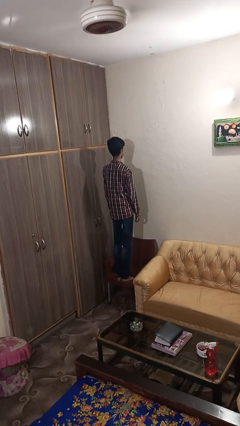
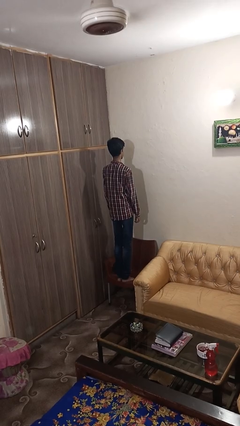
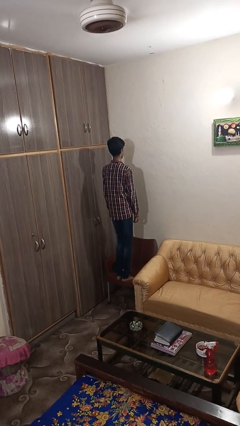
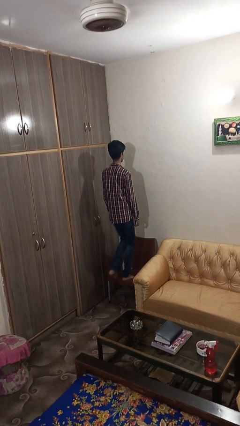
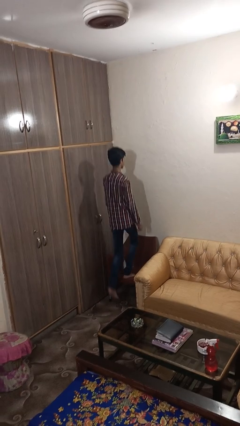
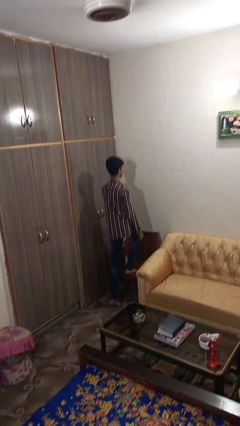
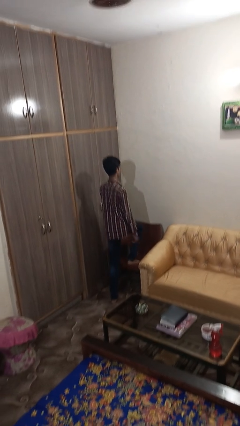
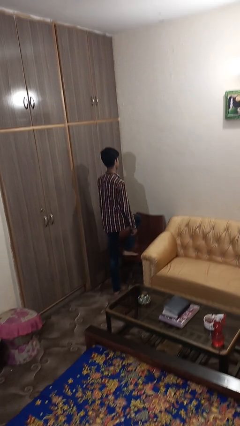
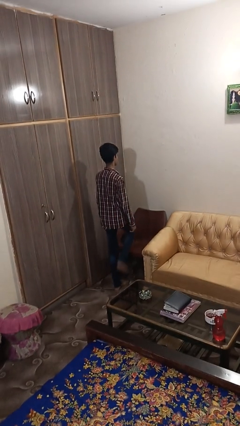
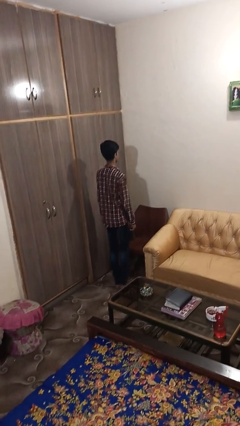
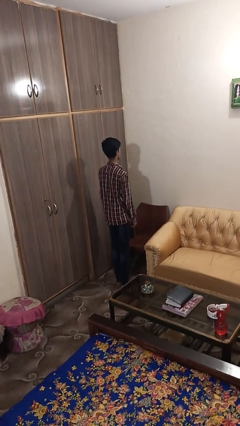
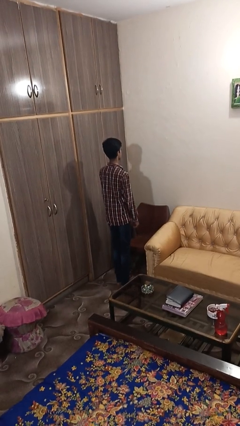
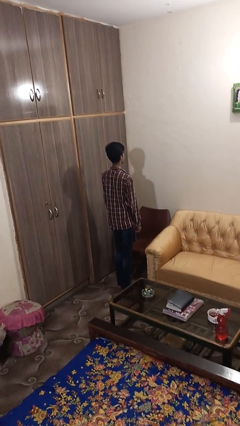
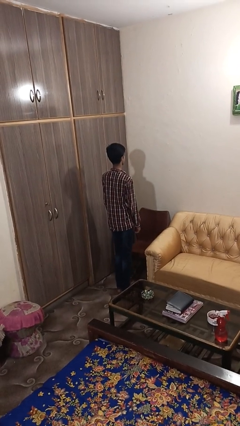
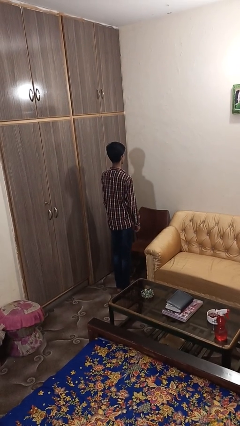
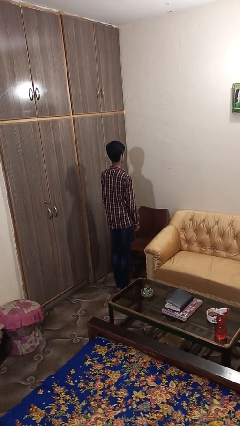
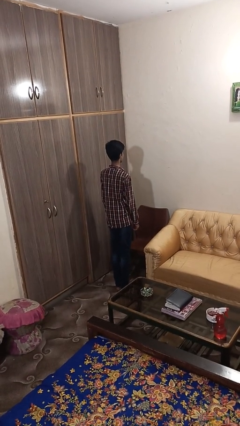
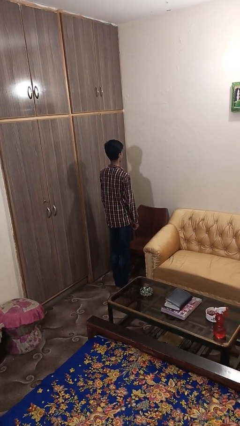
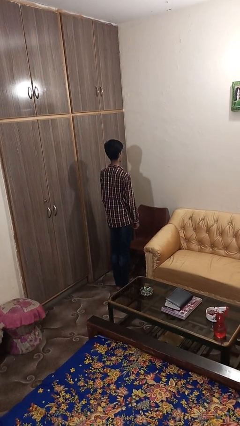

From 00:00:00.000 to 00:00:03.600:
person climbs off chair

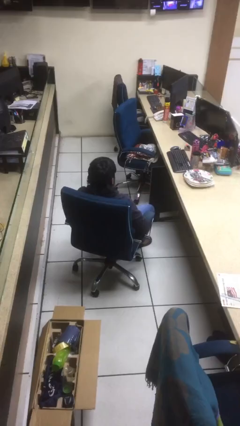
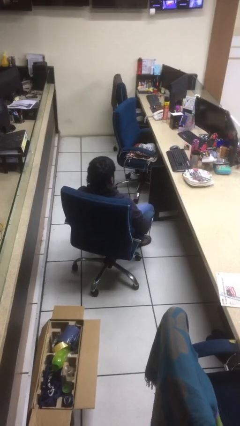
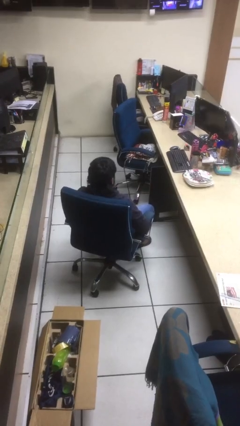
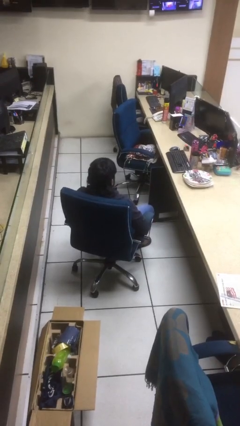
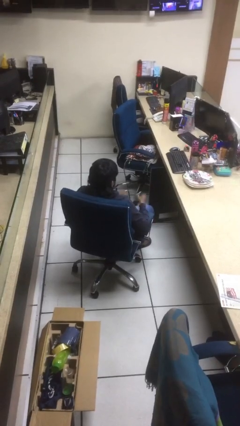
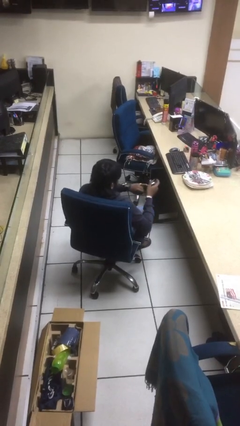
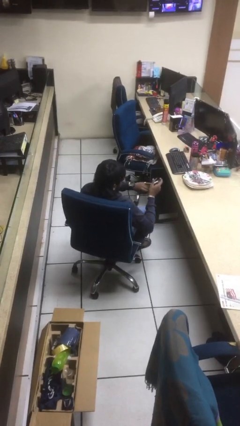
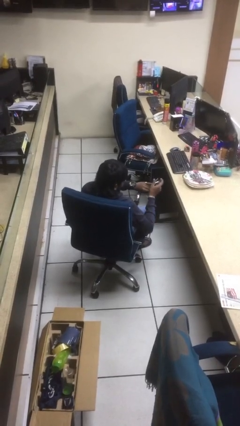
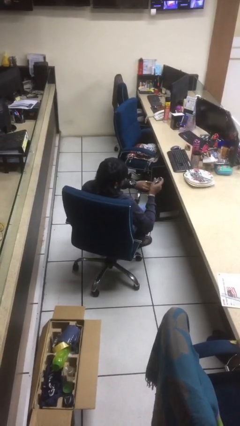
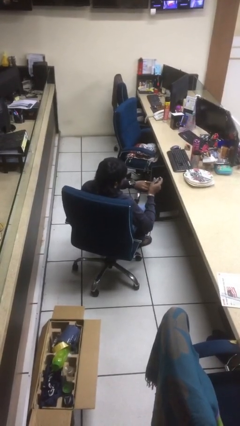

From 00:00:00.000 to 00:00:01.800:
person clips fingernails

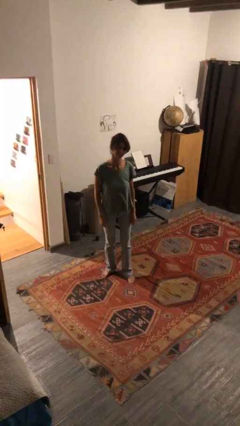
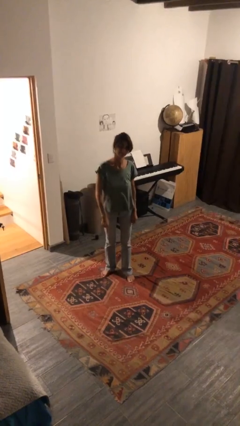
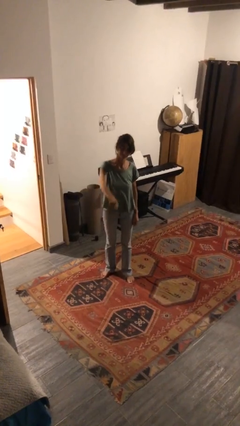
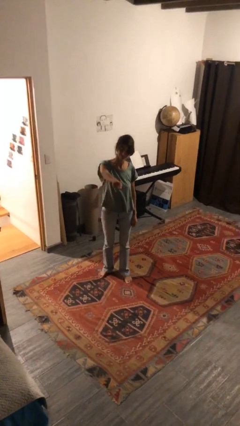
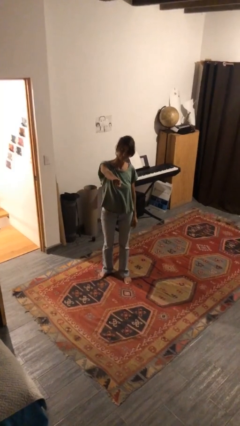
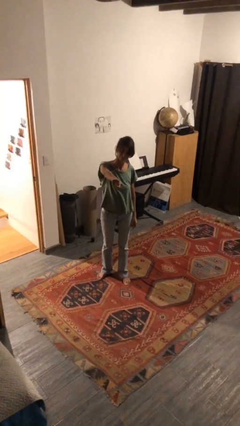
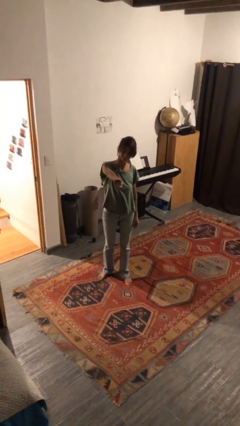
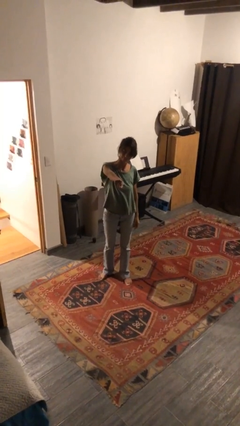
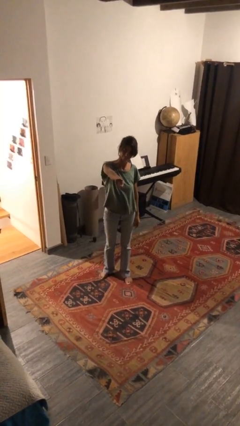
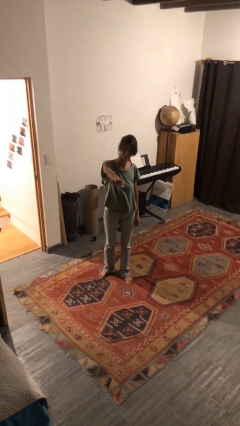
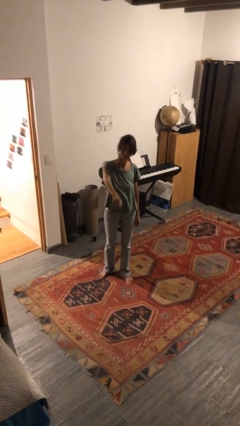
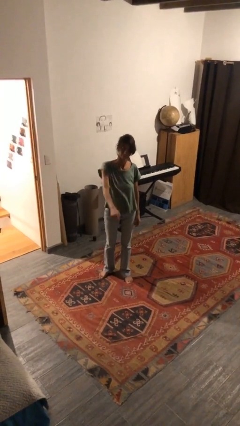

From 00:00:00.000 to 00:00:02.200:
person points at person

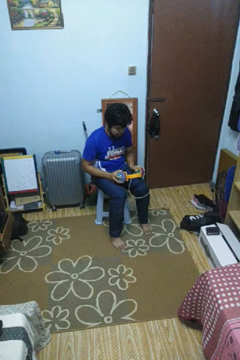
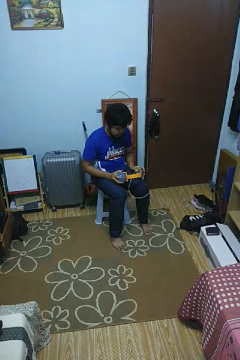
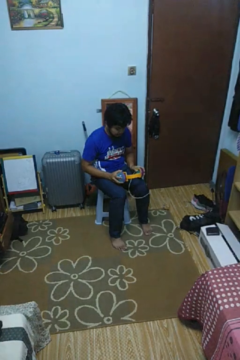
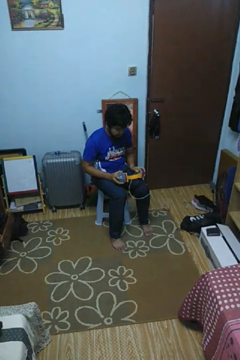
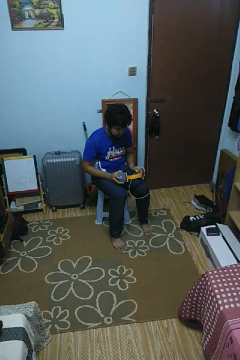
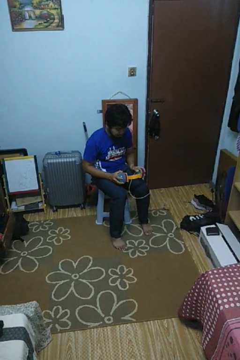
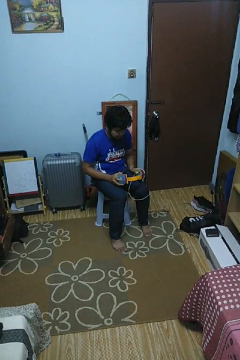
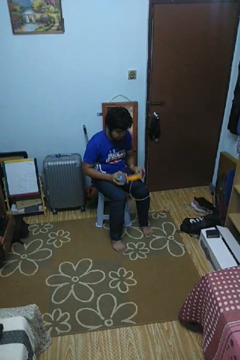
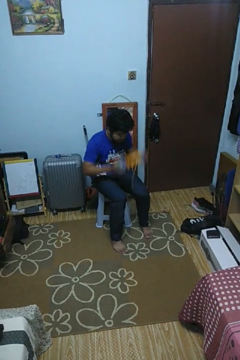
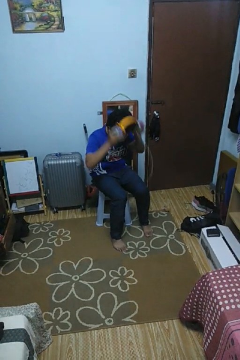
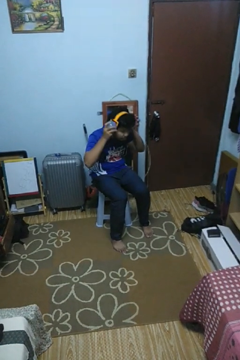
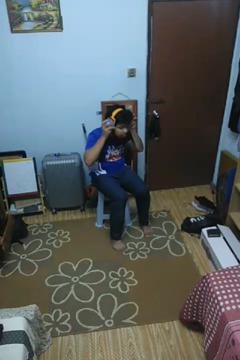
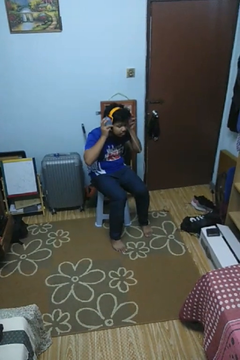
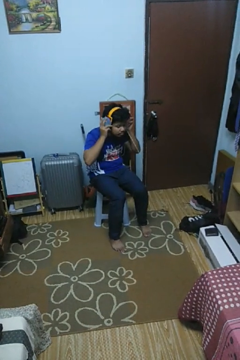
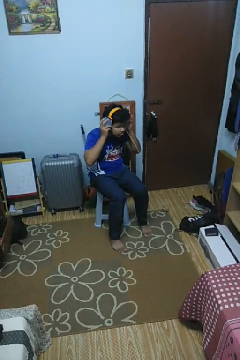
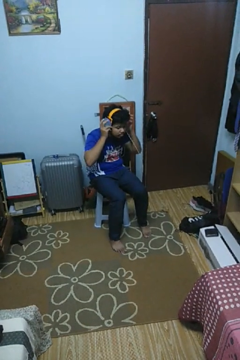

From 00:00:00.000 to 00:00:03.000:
person puts on headphones

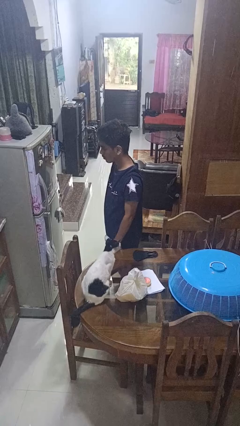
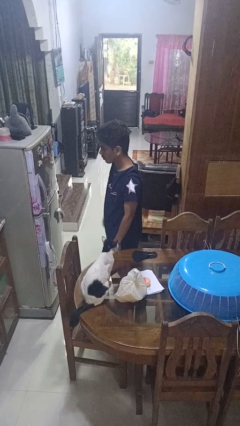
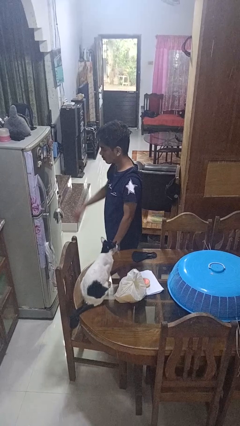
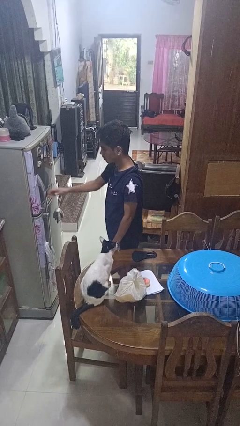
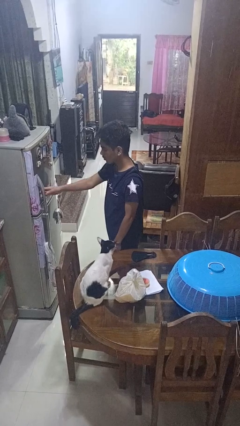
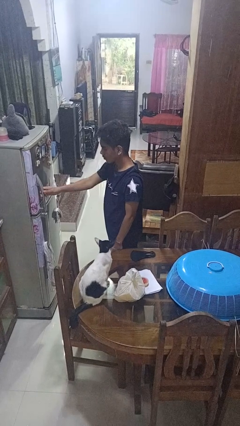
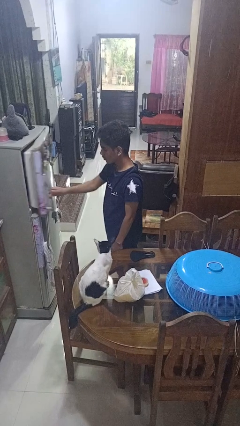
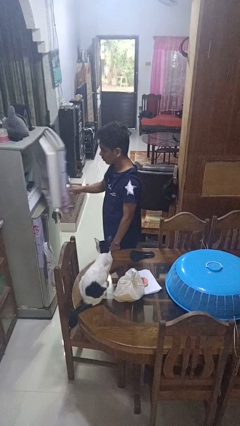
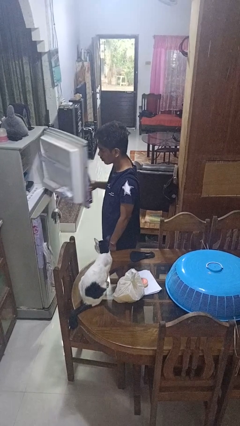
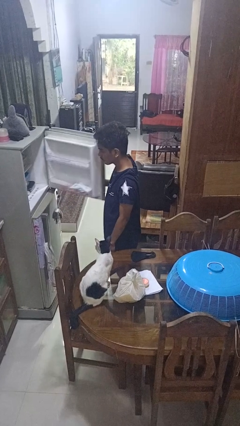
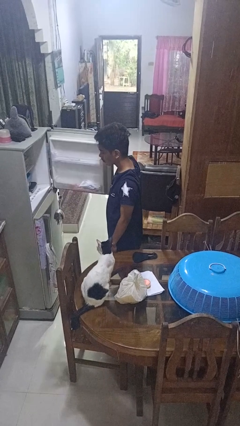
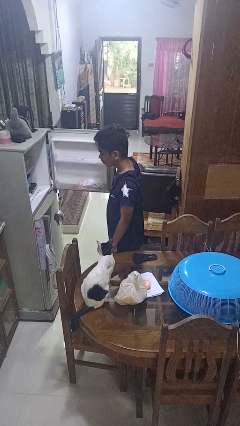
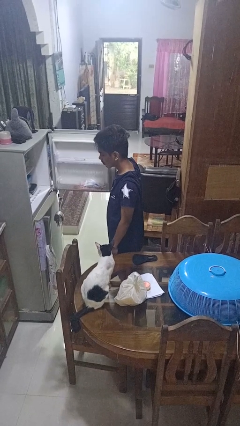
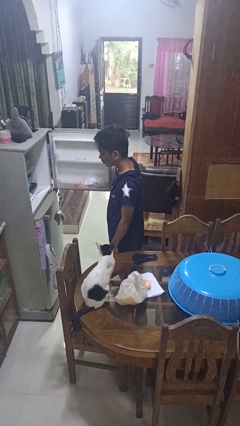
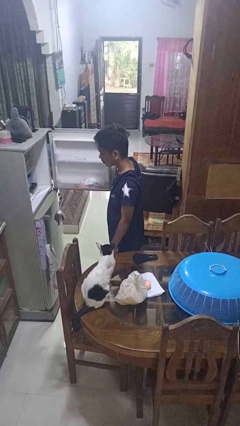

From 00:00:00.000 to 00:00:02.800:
person opens refrigerator

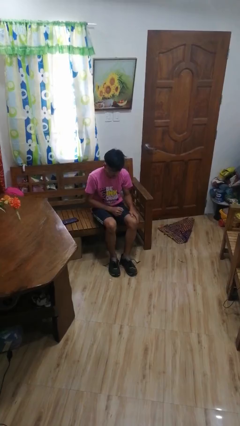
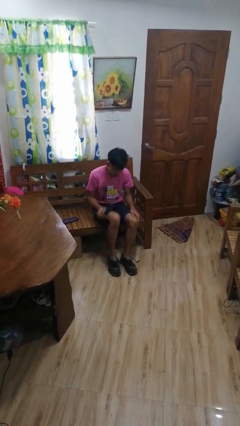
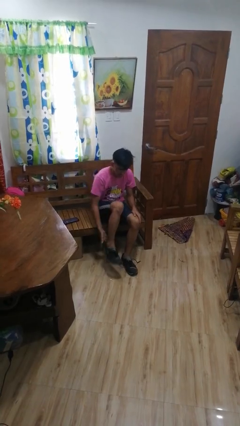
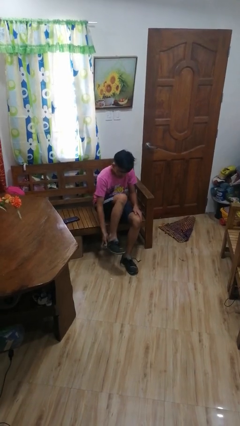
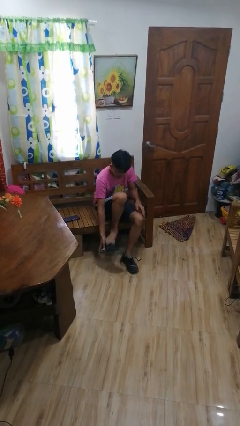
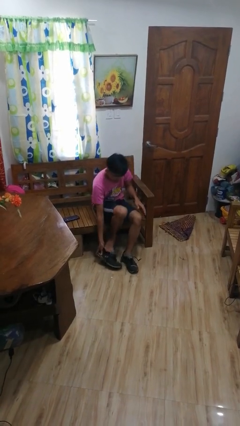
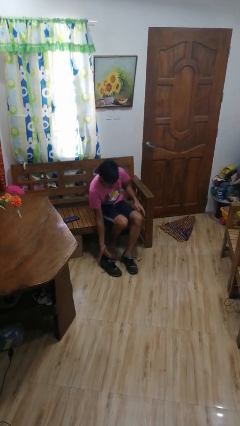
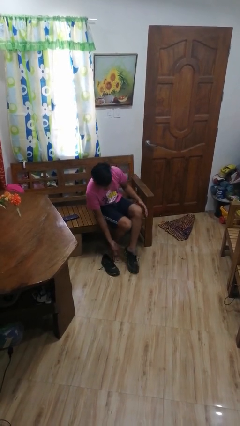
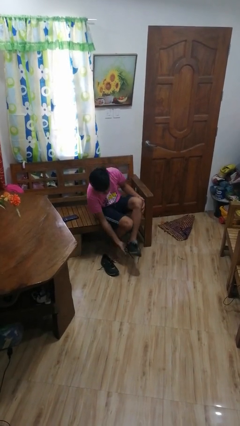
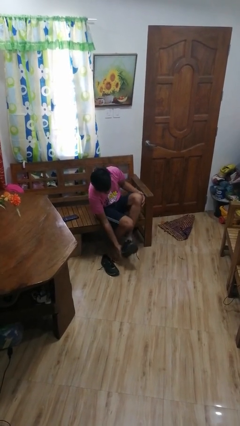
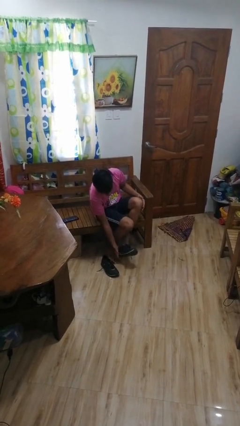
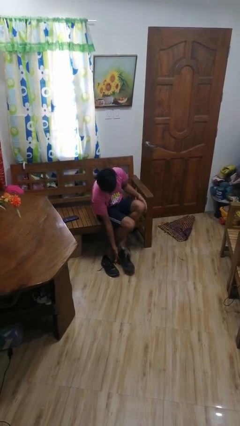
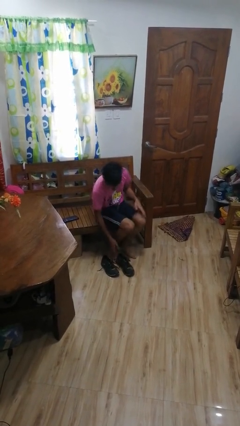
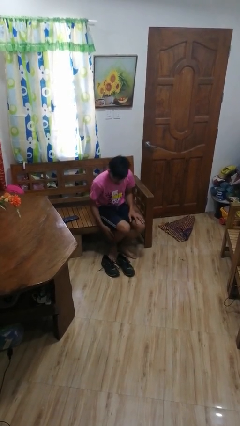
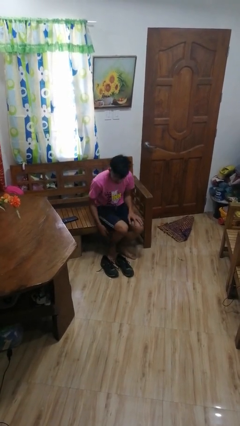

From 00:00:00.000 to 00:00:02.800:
person takes off shoes

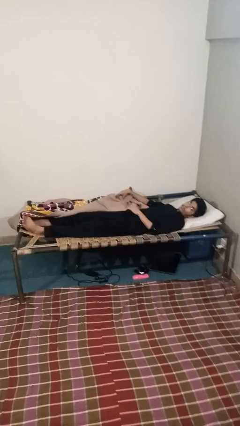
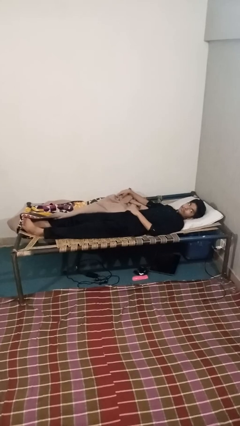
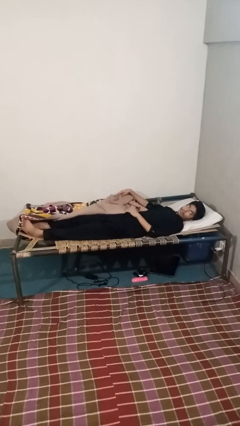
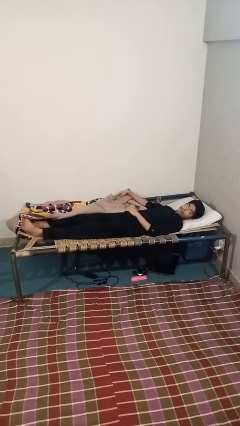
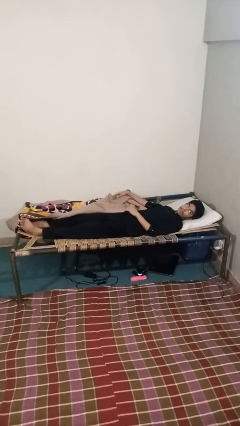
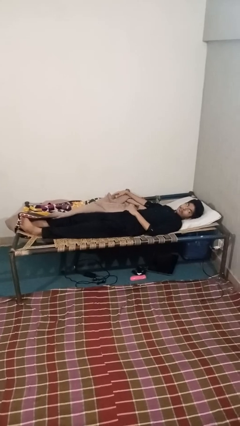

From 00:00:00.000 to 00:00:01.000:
person uncovers with bedsheets

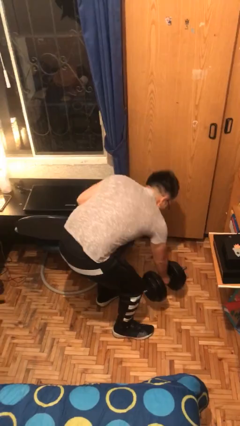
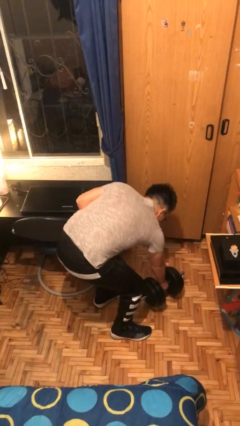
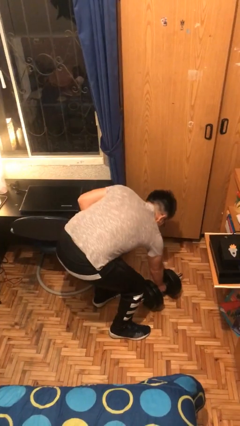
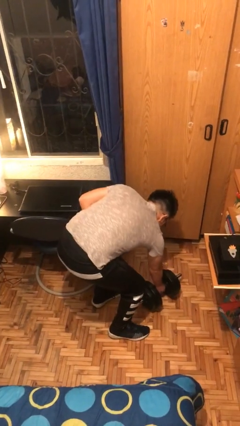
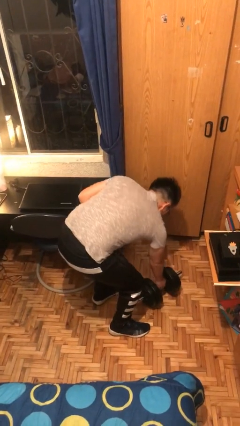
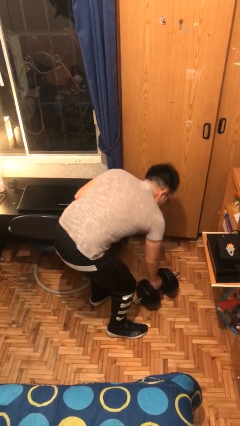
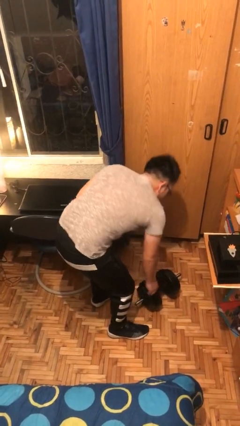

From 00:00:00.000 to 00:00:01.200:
person puts down object on floor
